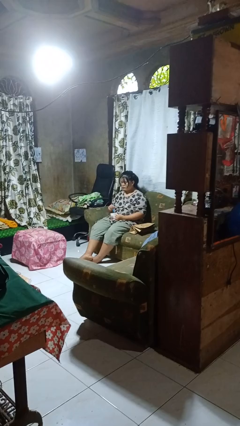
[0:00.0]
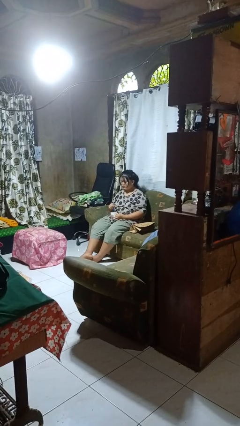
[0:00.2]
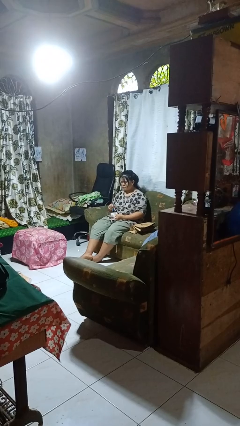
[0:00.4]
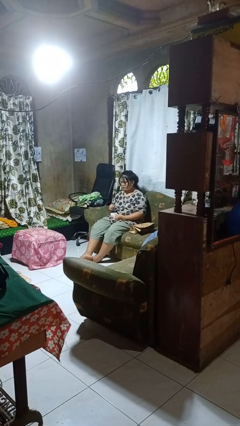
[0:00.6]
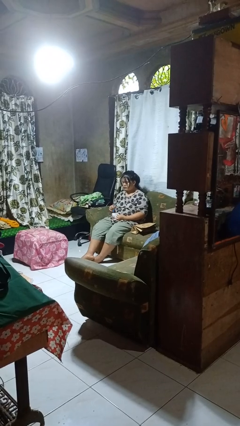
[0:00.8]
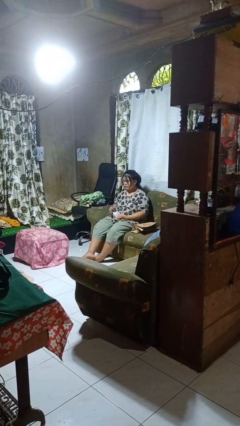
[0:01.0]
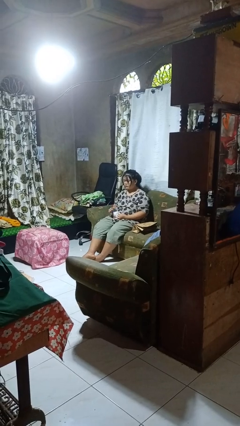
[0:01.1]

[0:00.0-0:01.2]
person stirs mug

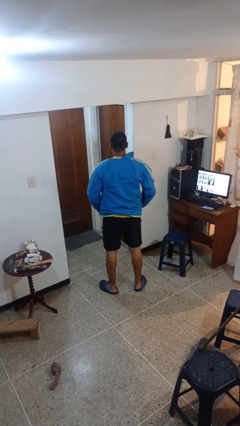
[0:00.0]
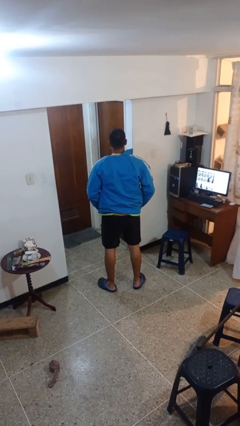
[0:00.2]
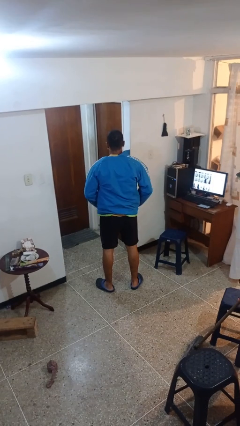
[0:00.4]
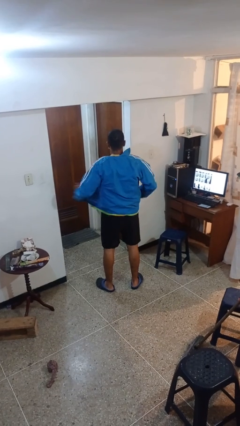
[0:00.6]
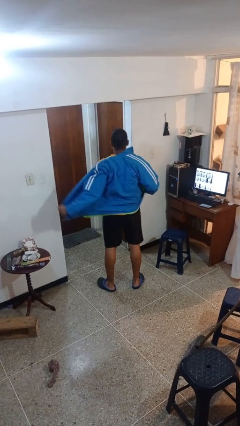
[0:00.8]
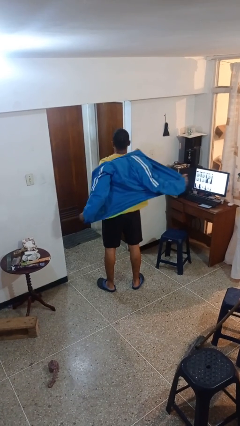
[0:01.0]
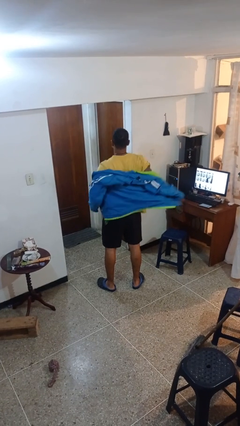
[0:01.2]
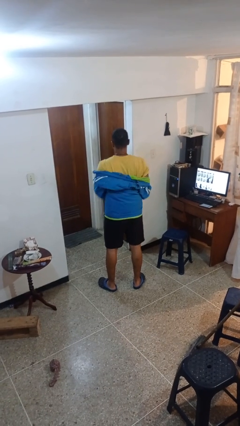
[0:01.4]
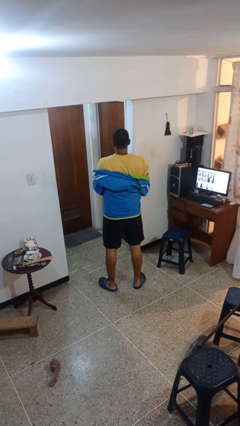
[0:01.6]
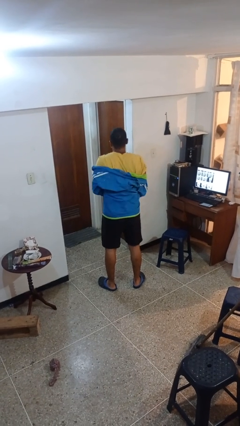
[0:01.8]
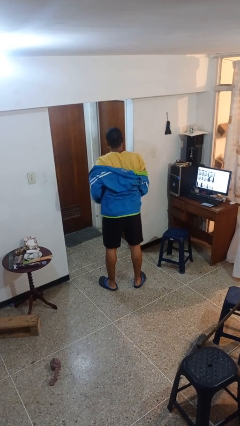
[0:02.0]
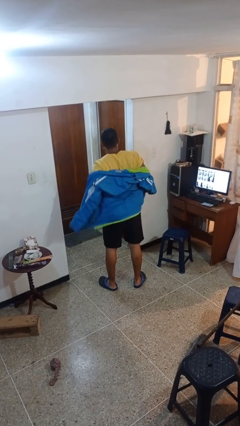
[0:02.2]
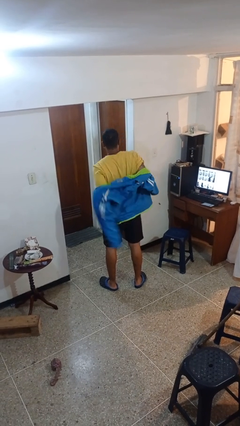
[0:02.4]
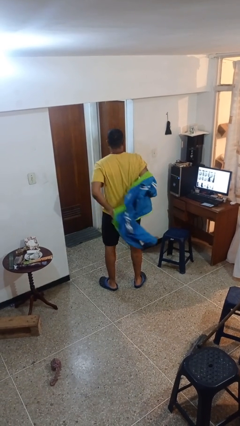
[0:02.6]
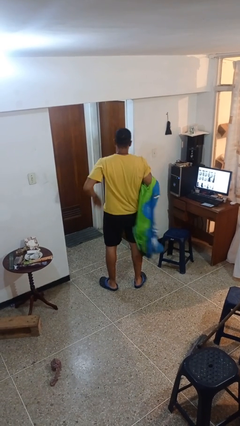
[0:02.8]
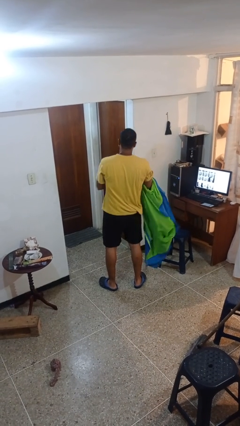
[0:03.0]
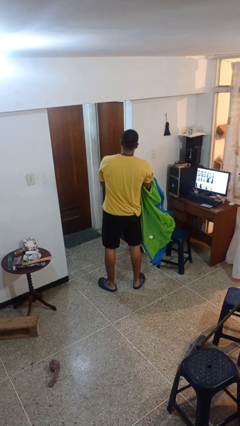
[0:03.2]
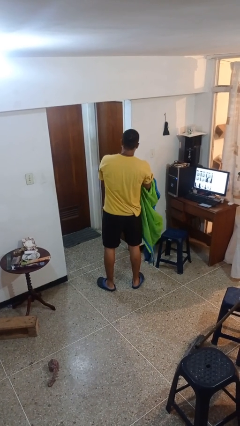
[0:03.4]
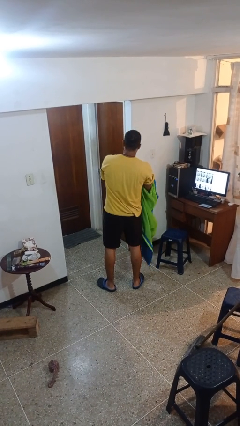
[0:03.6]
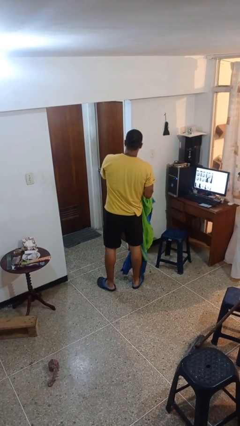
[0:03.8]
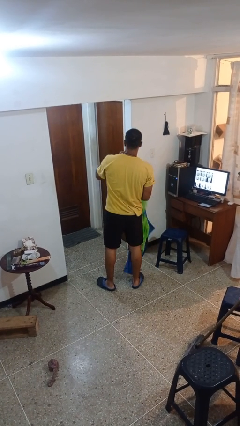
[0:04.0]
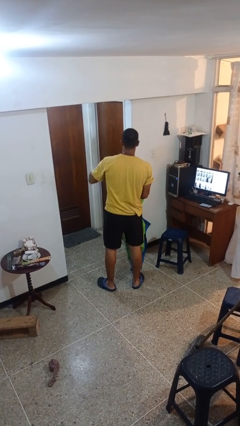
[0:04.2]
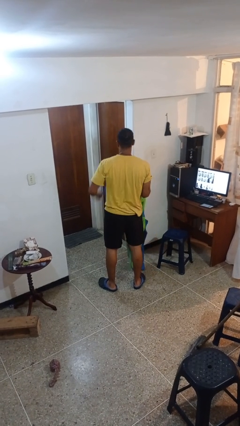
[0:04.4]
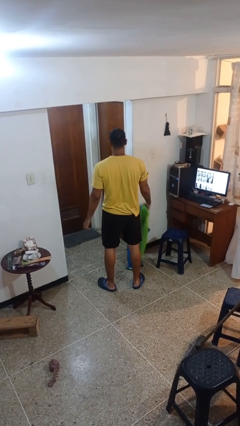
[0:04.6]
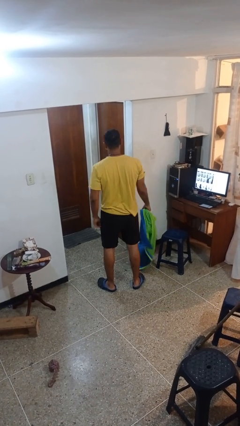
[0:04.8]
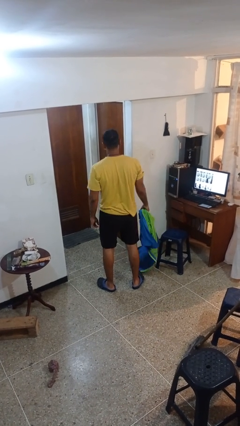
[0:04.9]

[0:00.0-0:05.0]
person takes off jacket

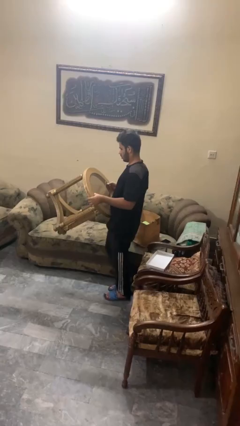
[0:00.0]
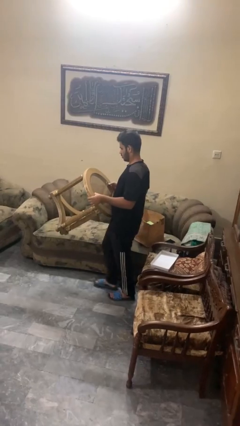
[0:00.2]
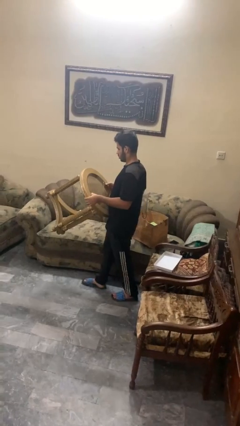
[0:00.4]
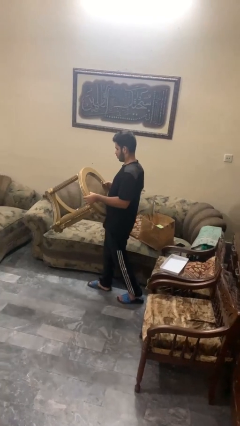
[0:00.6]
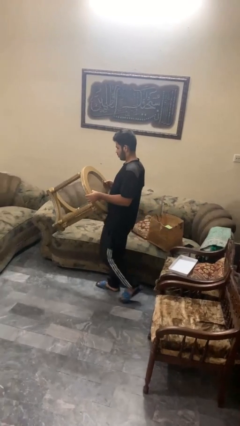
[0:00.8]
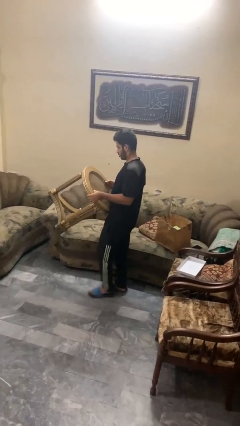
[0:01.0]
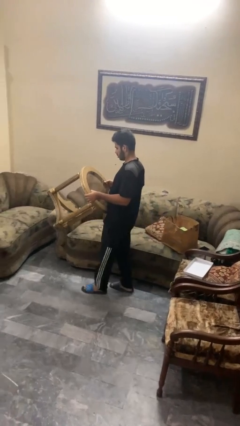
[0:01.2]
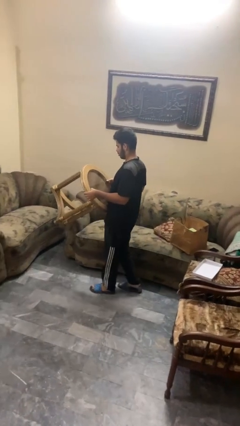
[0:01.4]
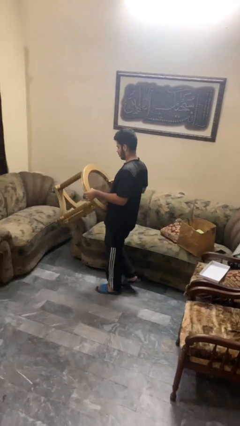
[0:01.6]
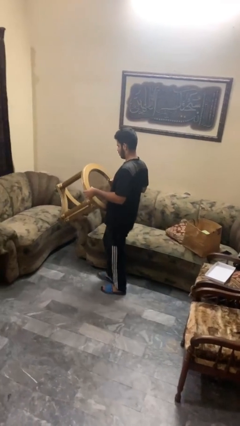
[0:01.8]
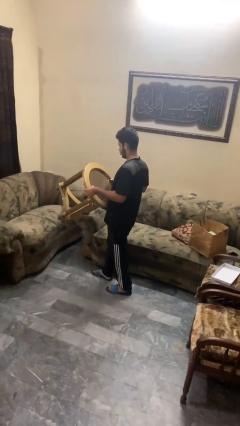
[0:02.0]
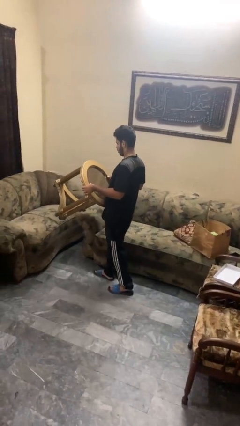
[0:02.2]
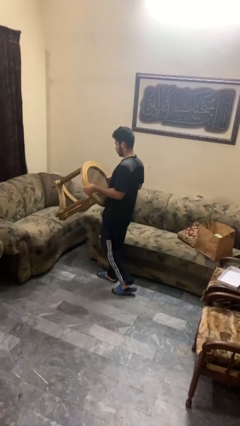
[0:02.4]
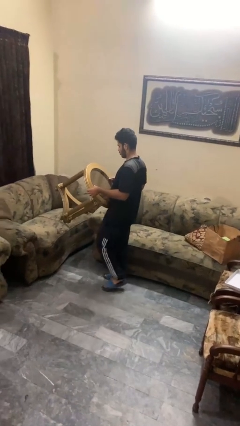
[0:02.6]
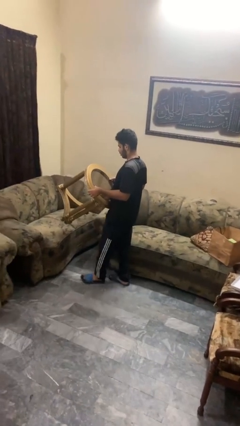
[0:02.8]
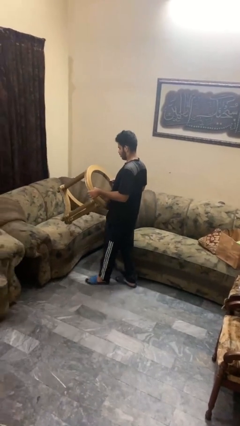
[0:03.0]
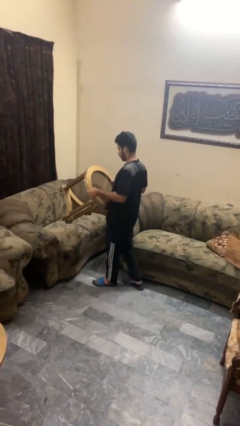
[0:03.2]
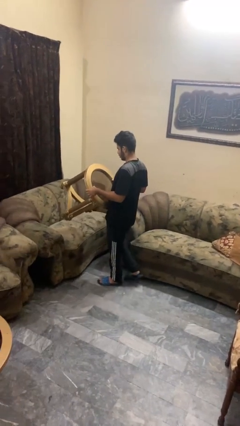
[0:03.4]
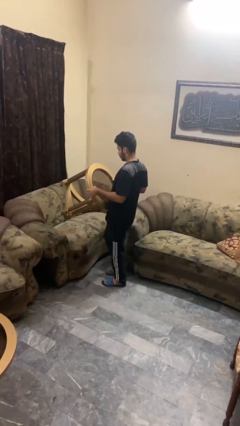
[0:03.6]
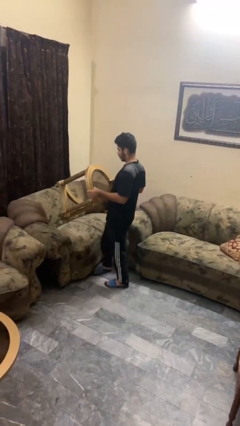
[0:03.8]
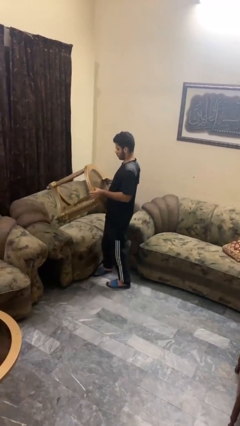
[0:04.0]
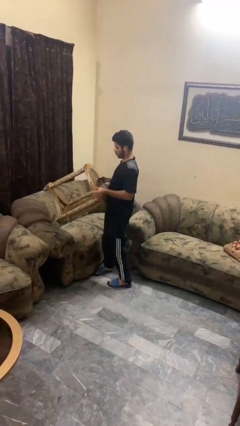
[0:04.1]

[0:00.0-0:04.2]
person carries furniture

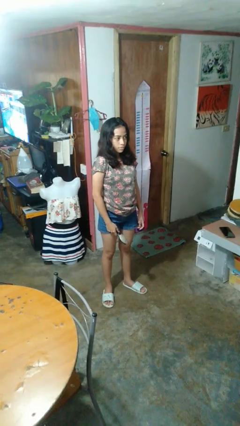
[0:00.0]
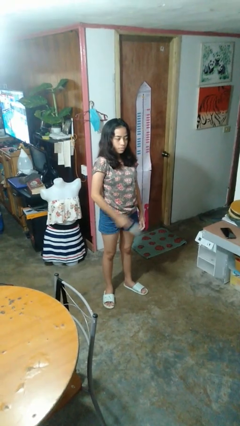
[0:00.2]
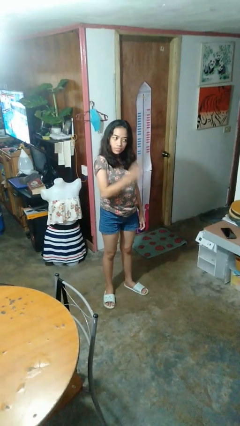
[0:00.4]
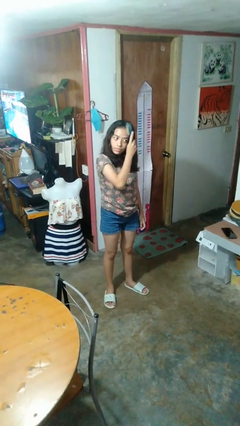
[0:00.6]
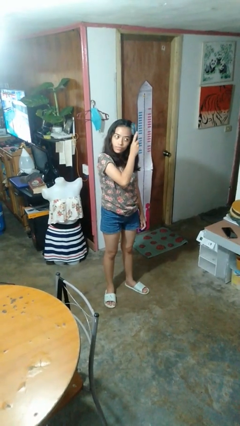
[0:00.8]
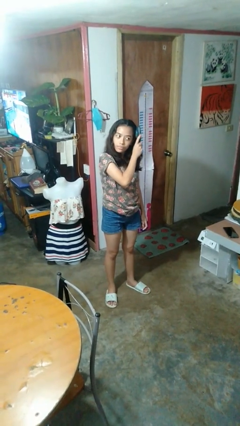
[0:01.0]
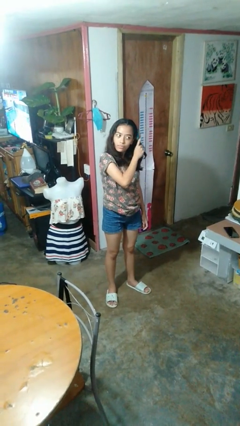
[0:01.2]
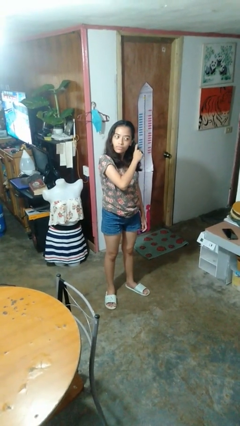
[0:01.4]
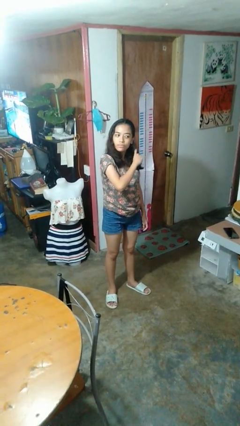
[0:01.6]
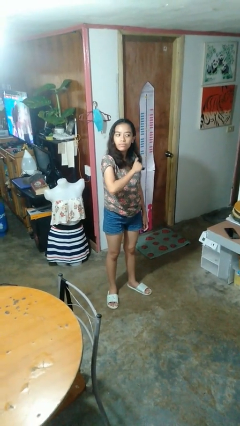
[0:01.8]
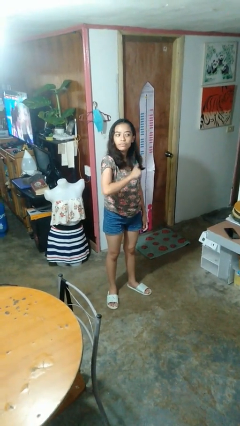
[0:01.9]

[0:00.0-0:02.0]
person brushes hair

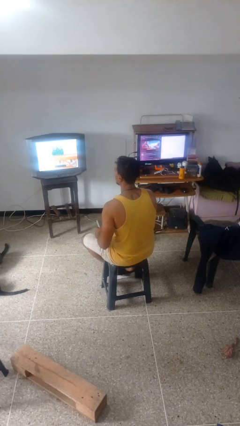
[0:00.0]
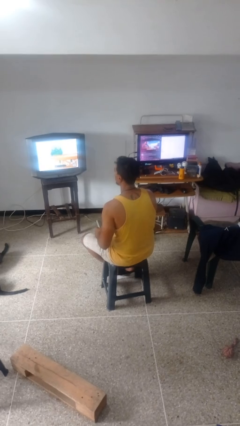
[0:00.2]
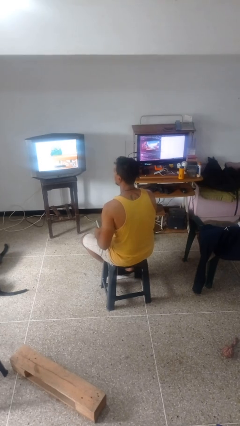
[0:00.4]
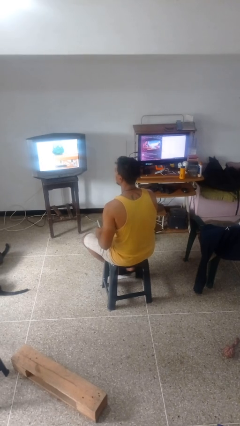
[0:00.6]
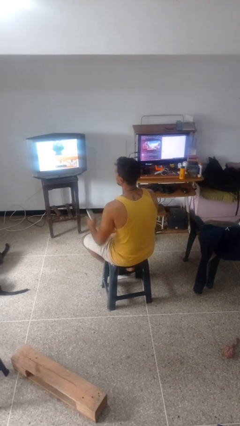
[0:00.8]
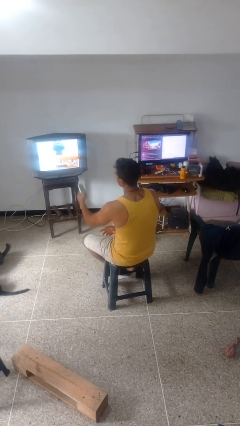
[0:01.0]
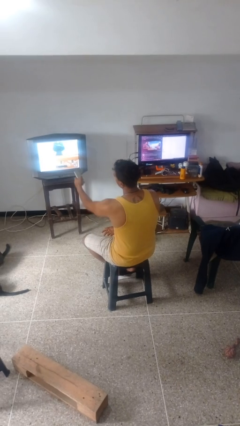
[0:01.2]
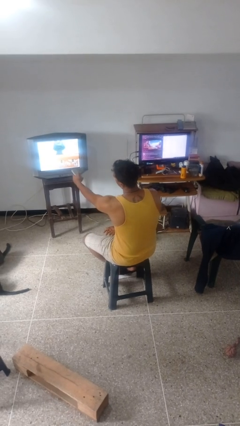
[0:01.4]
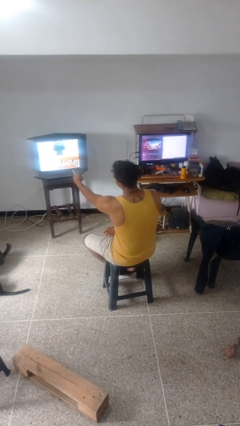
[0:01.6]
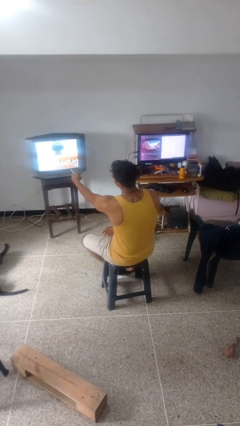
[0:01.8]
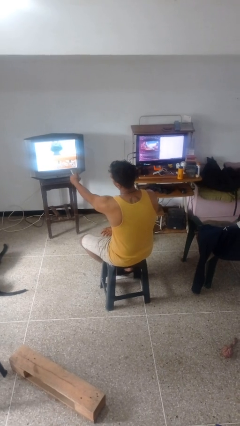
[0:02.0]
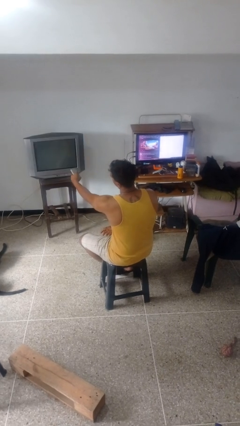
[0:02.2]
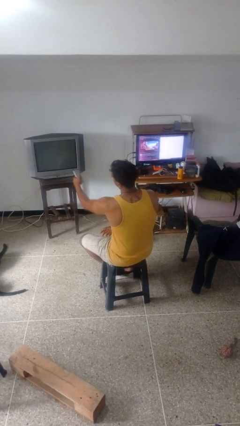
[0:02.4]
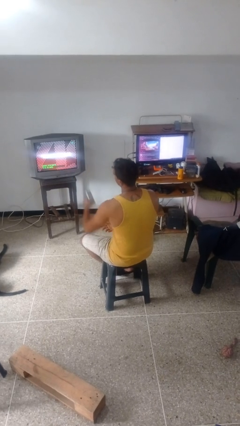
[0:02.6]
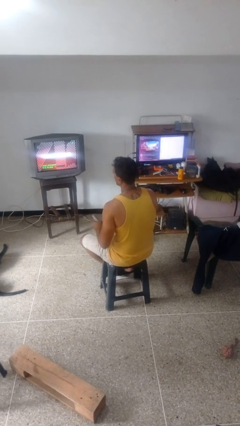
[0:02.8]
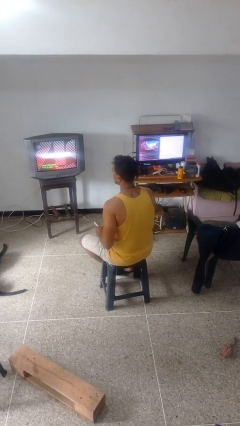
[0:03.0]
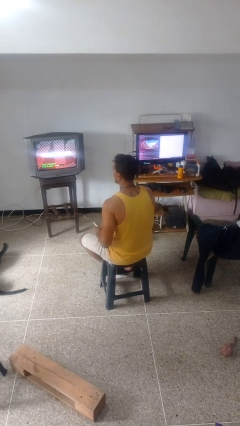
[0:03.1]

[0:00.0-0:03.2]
person uses television remote

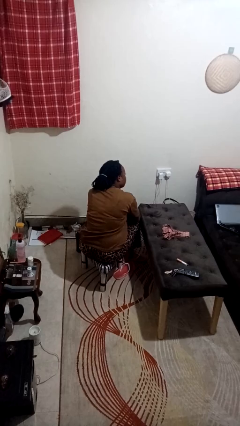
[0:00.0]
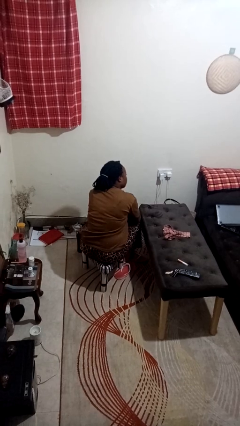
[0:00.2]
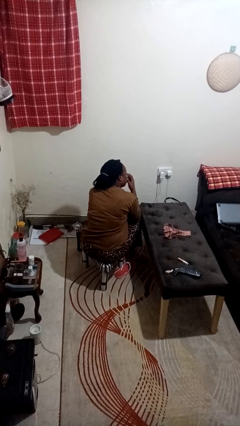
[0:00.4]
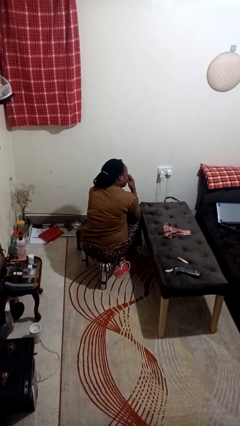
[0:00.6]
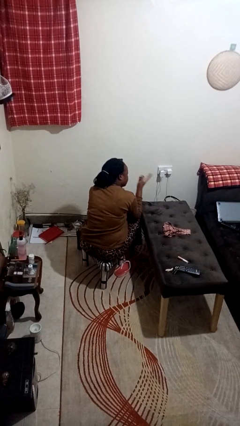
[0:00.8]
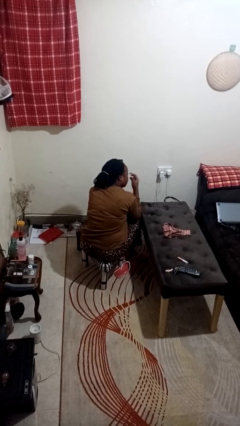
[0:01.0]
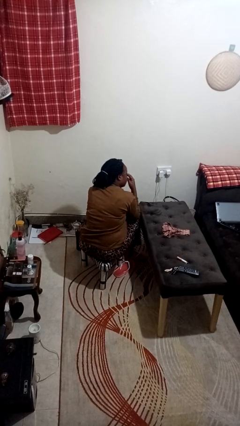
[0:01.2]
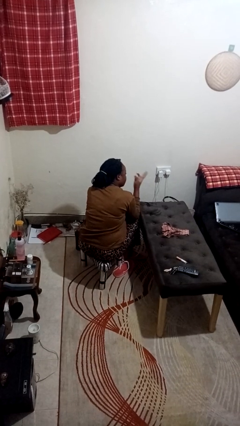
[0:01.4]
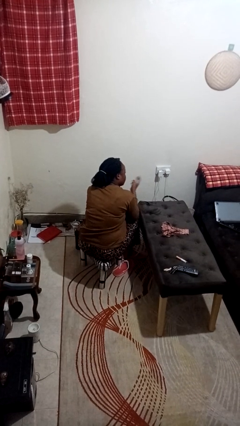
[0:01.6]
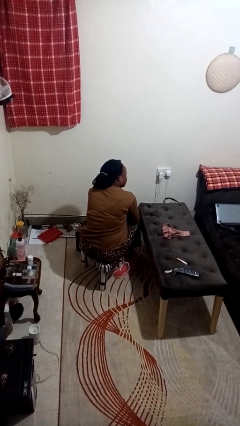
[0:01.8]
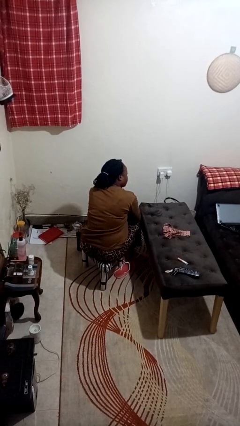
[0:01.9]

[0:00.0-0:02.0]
person gestures watch closely
